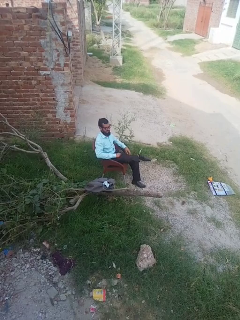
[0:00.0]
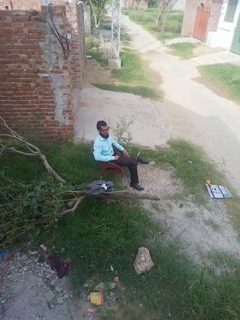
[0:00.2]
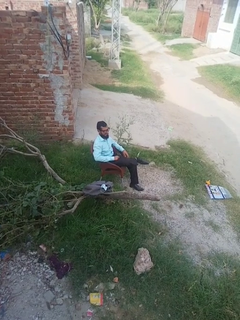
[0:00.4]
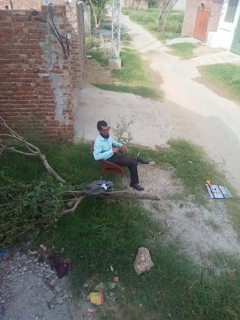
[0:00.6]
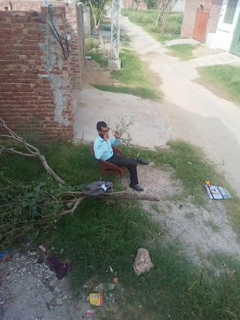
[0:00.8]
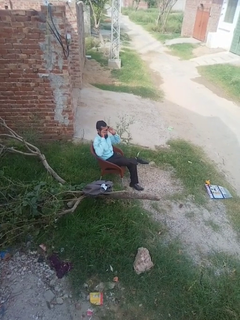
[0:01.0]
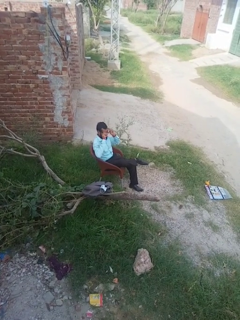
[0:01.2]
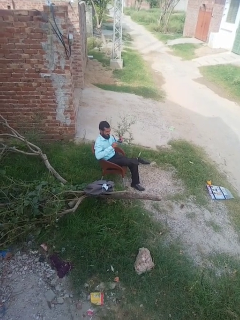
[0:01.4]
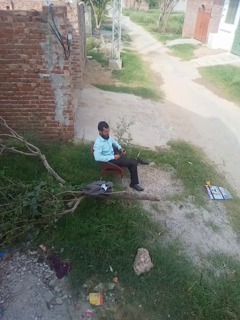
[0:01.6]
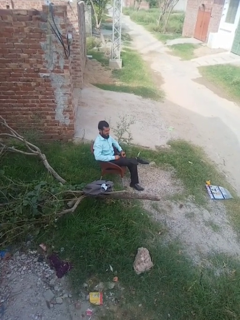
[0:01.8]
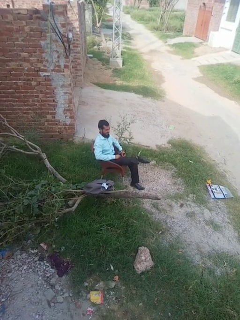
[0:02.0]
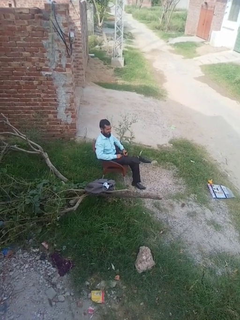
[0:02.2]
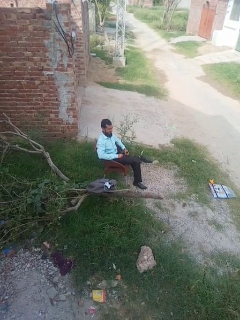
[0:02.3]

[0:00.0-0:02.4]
person takes off glasses

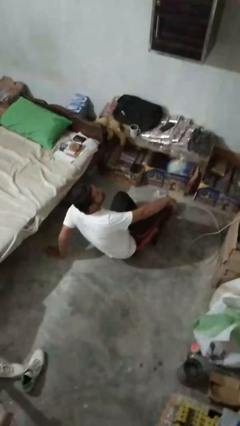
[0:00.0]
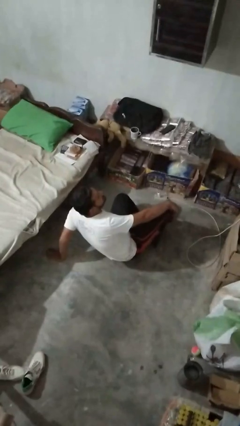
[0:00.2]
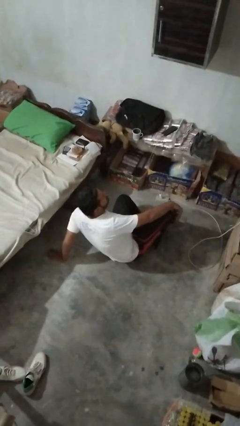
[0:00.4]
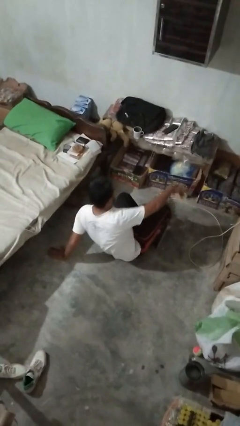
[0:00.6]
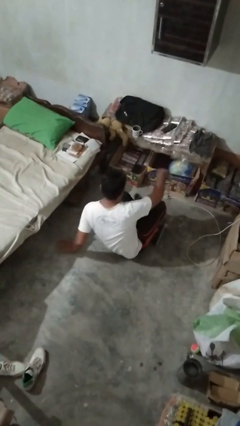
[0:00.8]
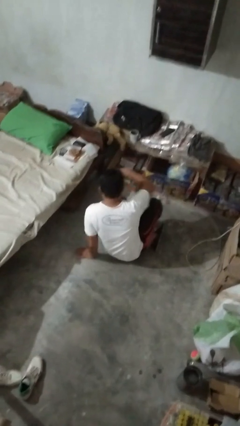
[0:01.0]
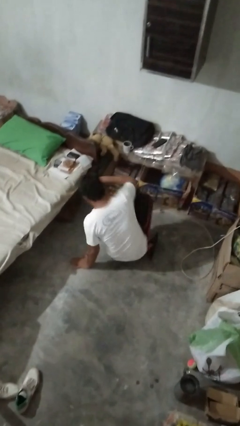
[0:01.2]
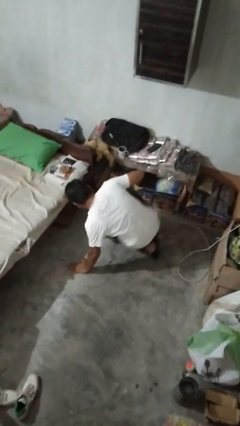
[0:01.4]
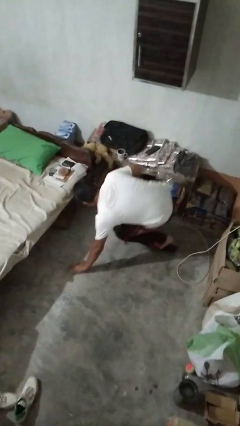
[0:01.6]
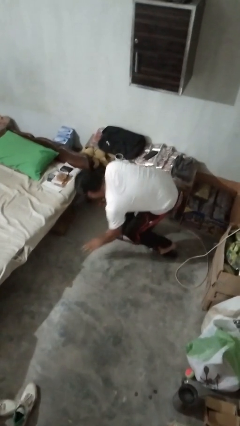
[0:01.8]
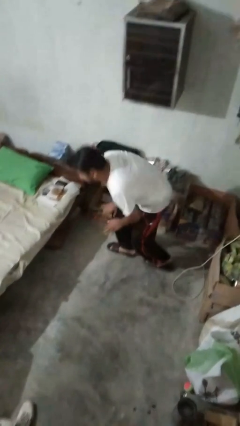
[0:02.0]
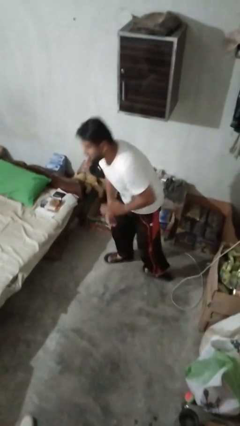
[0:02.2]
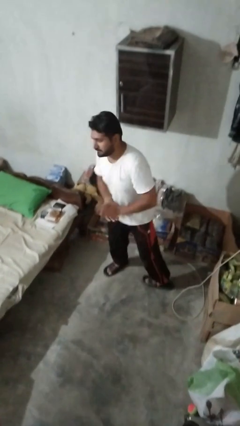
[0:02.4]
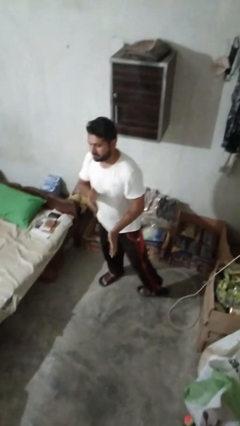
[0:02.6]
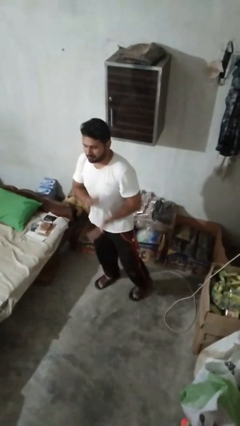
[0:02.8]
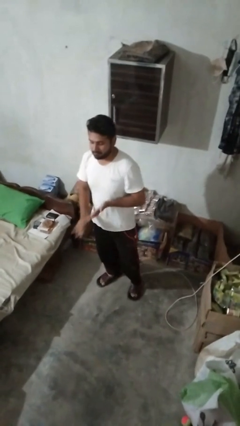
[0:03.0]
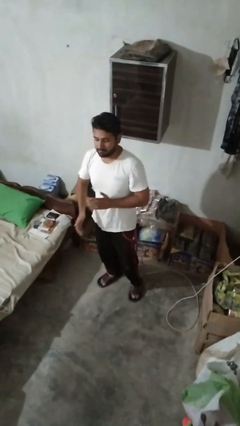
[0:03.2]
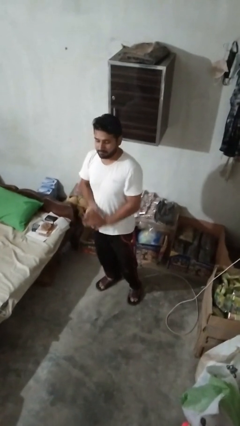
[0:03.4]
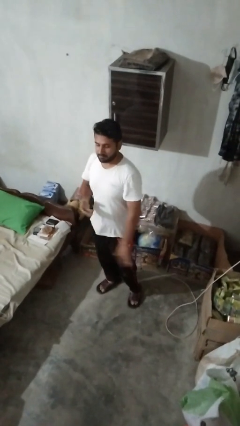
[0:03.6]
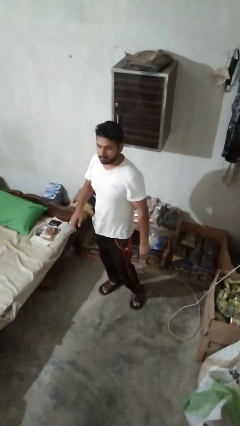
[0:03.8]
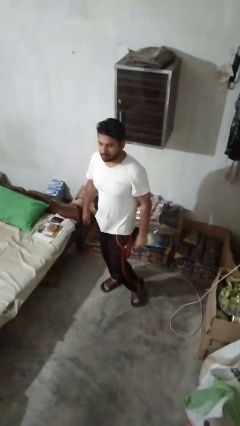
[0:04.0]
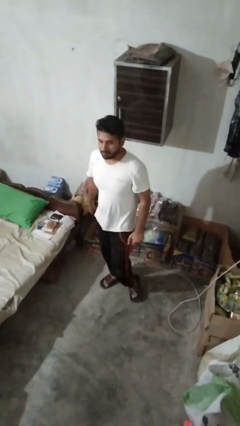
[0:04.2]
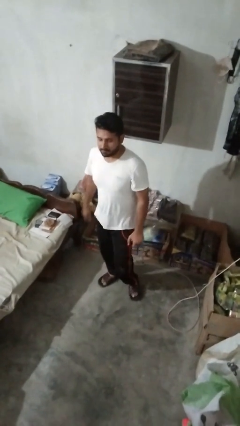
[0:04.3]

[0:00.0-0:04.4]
person stands up from floor

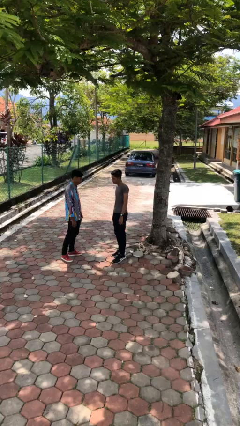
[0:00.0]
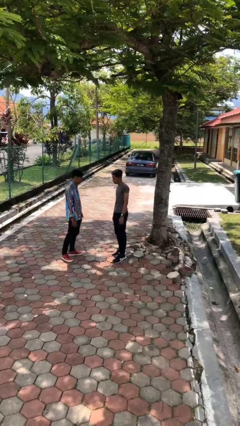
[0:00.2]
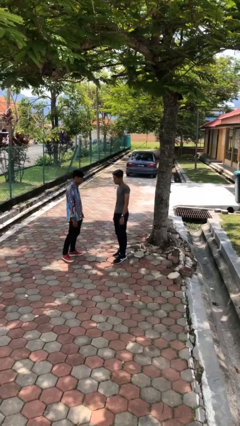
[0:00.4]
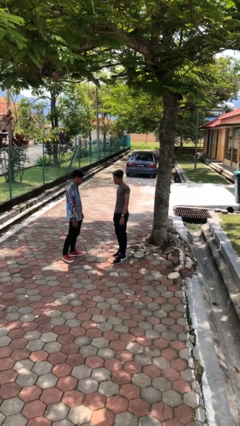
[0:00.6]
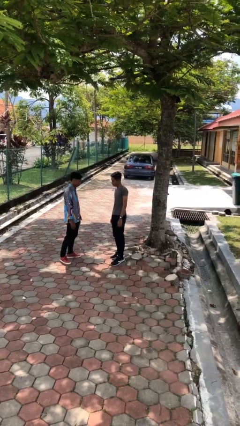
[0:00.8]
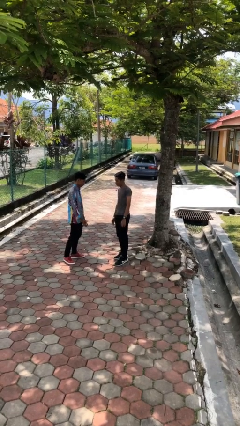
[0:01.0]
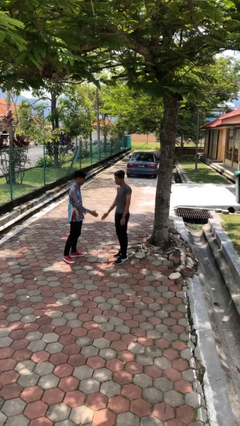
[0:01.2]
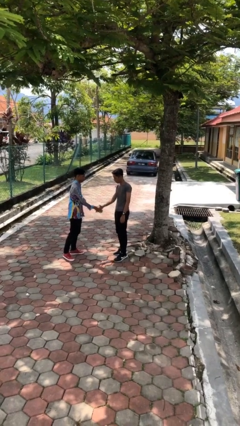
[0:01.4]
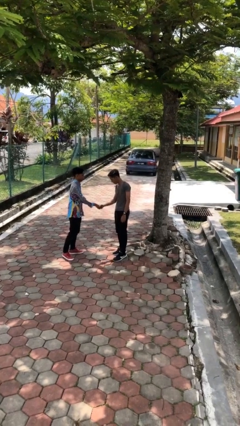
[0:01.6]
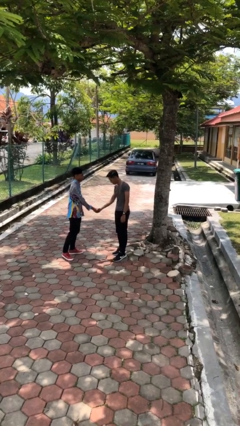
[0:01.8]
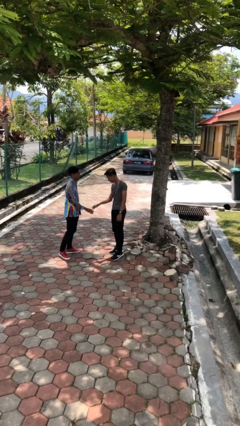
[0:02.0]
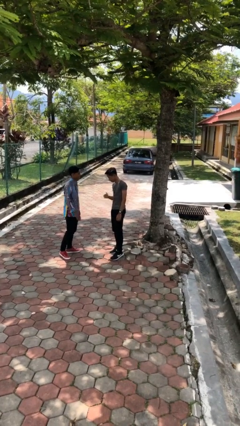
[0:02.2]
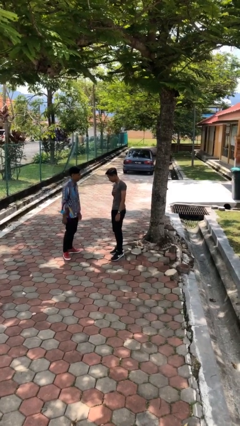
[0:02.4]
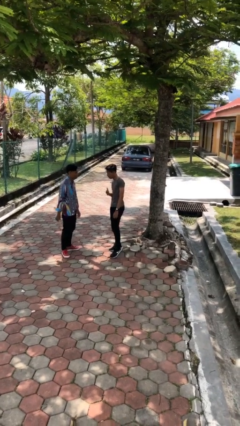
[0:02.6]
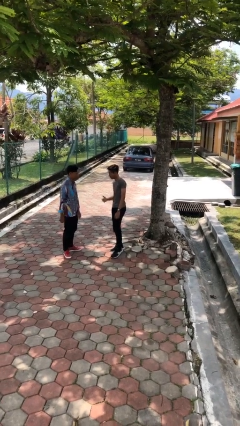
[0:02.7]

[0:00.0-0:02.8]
person shakes hand

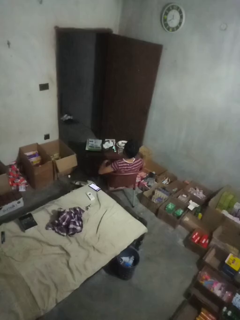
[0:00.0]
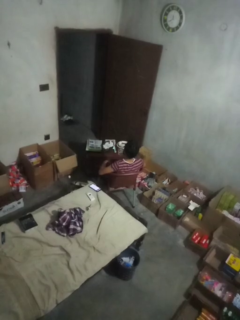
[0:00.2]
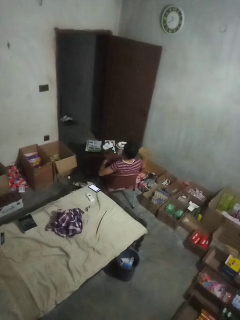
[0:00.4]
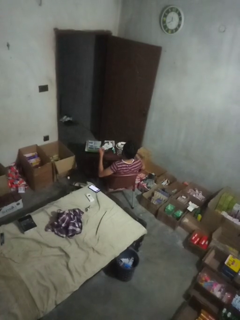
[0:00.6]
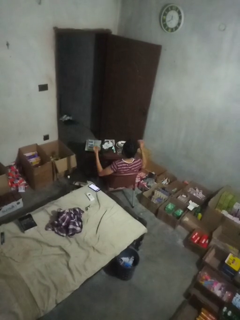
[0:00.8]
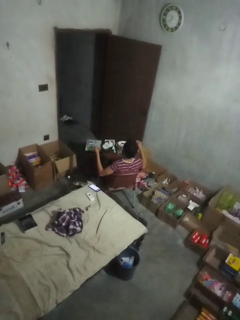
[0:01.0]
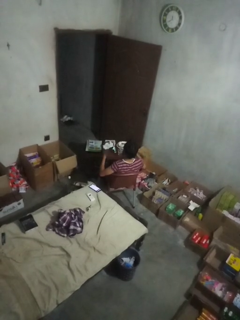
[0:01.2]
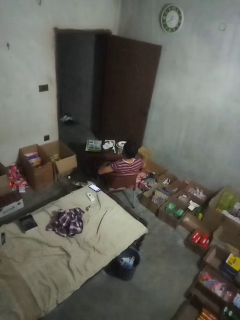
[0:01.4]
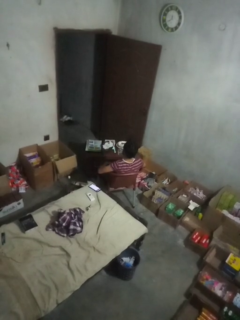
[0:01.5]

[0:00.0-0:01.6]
person snaps fingers

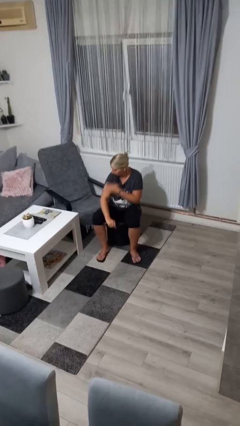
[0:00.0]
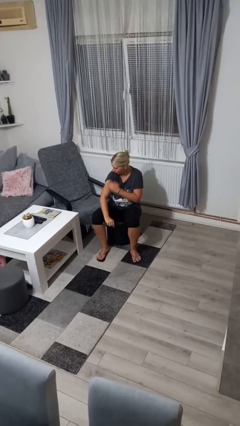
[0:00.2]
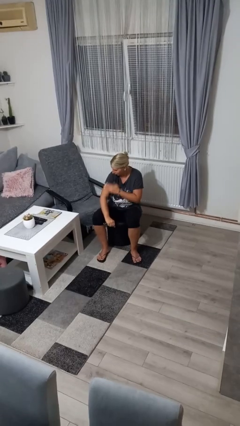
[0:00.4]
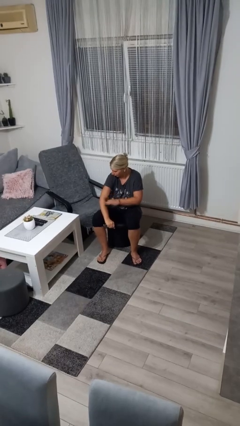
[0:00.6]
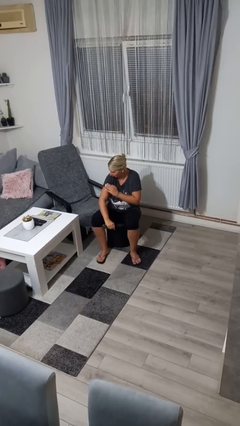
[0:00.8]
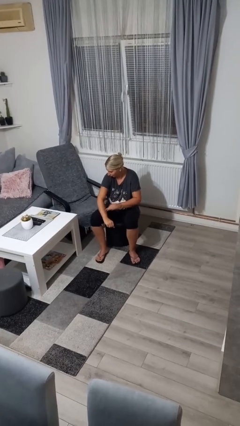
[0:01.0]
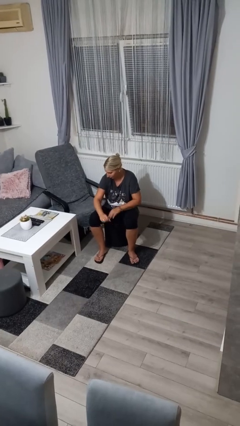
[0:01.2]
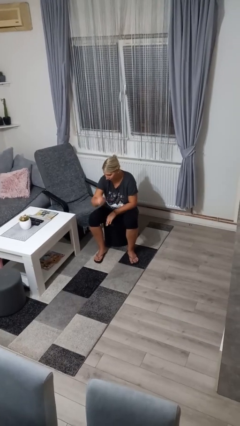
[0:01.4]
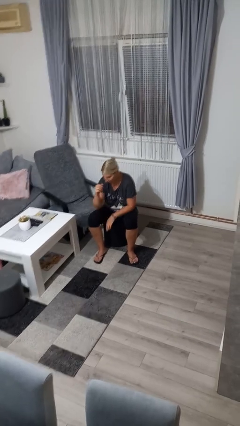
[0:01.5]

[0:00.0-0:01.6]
person swats bug

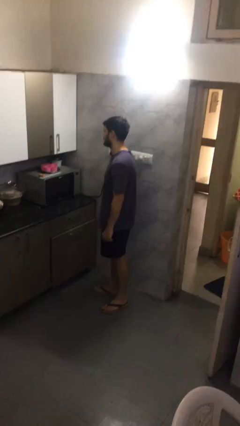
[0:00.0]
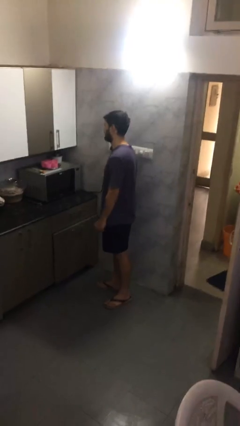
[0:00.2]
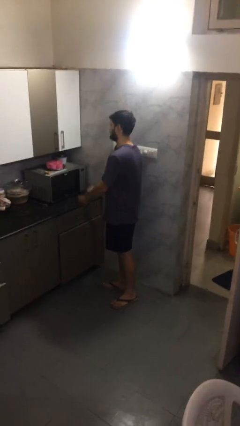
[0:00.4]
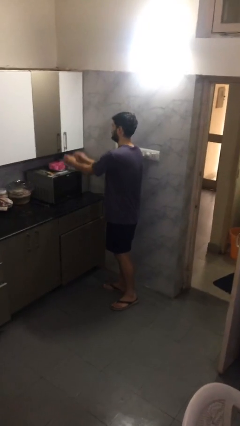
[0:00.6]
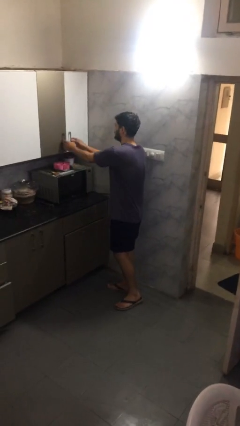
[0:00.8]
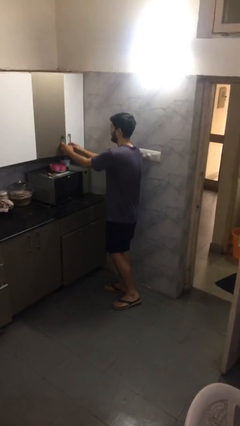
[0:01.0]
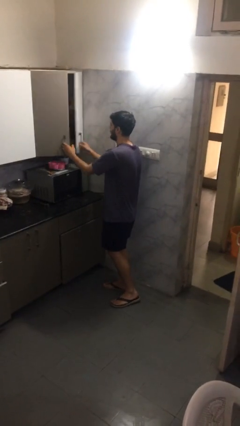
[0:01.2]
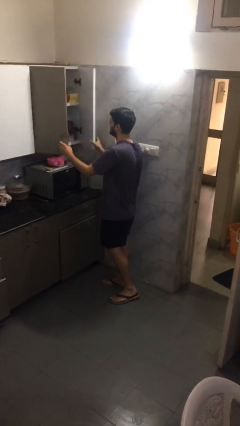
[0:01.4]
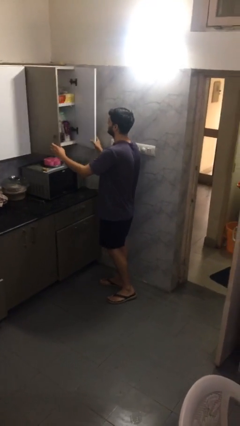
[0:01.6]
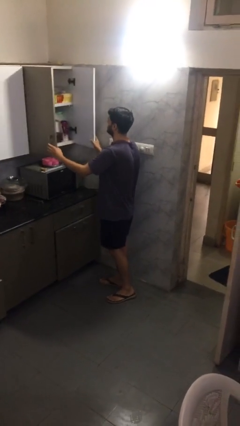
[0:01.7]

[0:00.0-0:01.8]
person opens cabinet

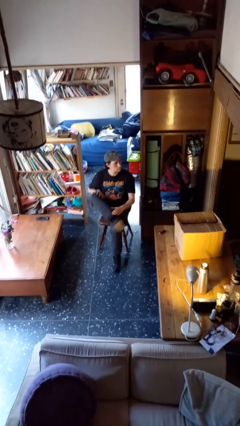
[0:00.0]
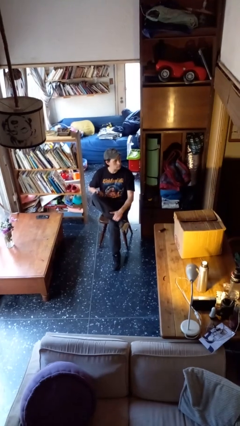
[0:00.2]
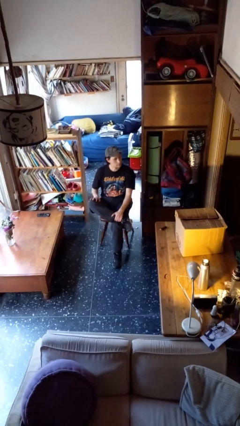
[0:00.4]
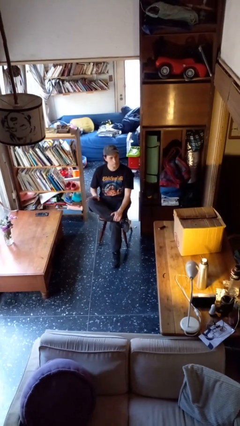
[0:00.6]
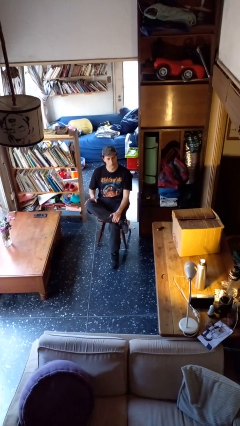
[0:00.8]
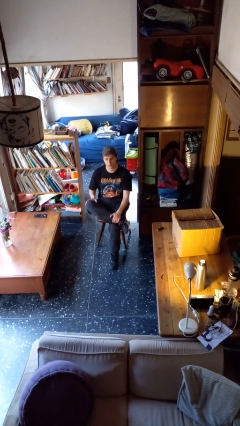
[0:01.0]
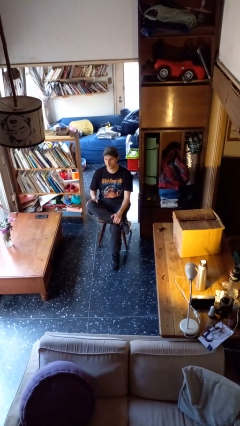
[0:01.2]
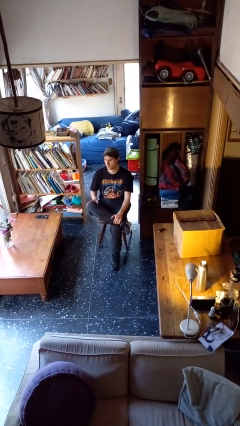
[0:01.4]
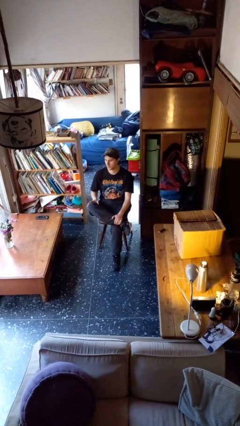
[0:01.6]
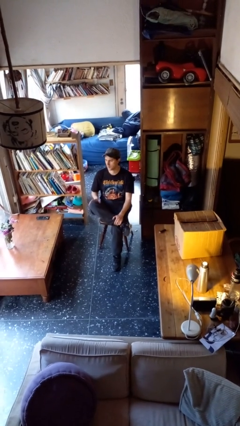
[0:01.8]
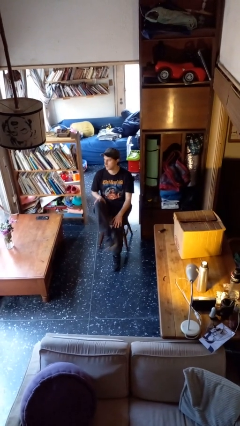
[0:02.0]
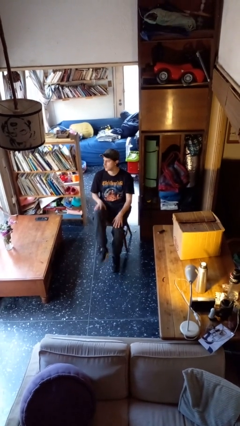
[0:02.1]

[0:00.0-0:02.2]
person crosses legs

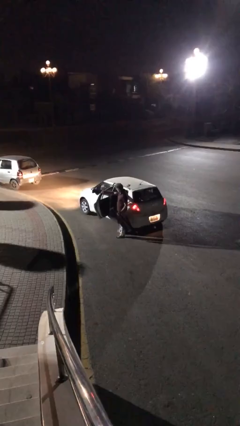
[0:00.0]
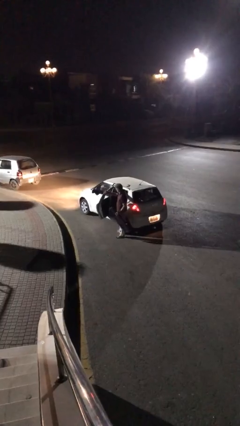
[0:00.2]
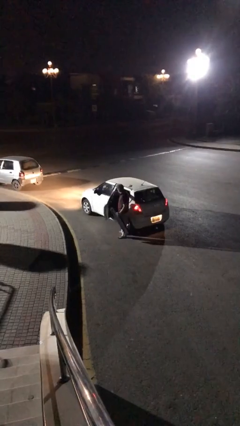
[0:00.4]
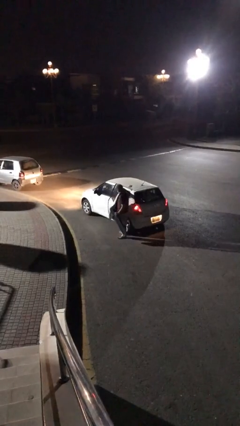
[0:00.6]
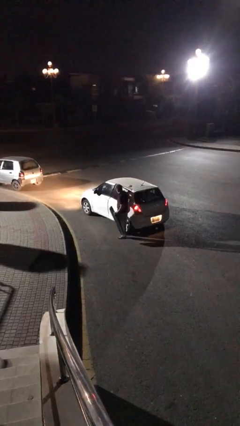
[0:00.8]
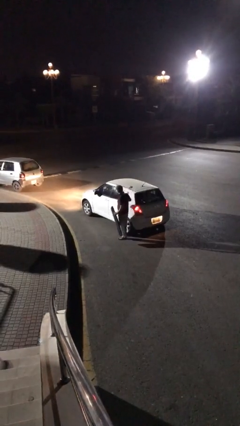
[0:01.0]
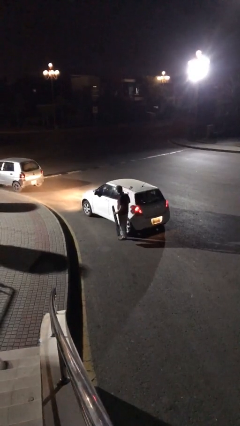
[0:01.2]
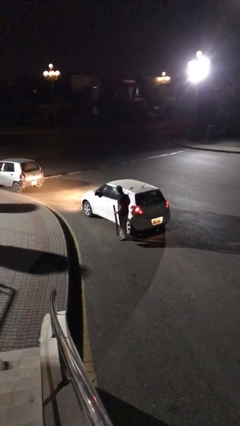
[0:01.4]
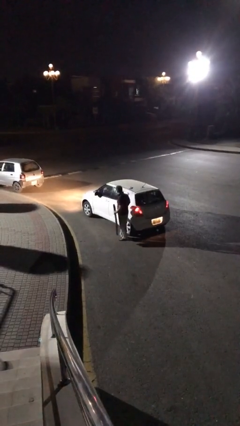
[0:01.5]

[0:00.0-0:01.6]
person closes car door
